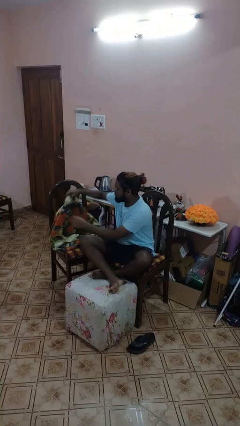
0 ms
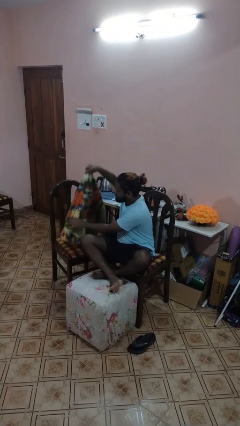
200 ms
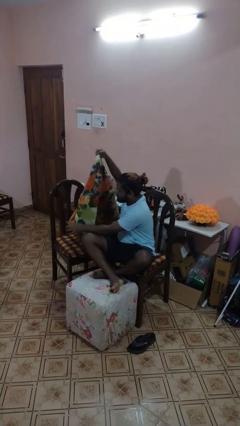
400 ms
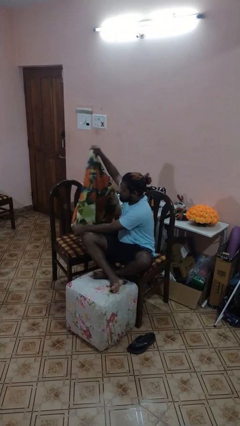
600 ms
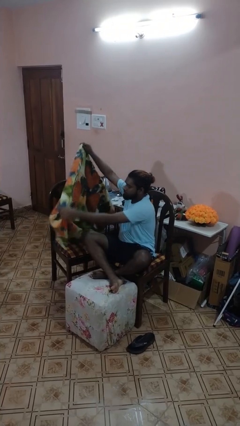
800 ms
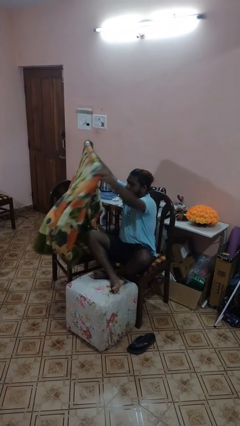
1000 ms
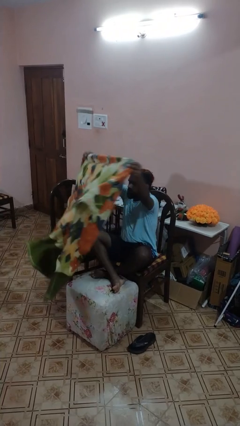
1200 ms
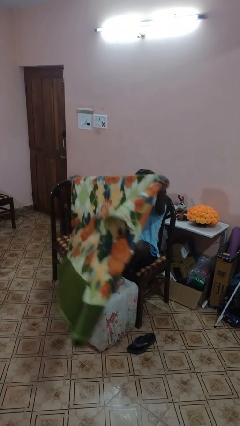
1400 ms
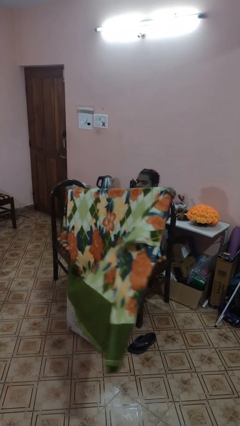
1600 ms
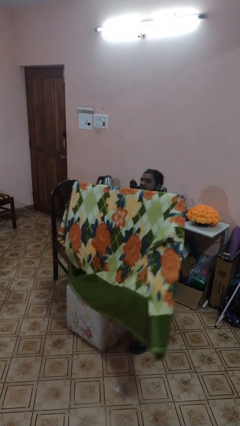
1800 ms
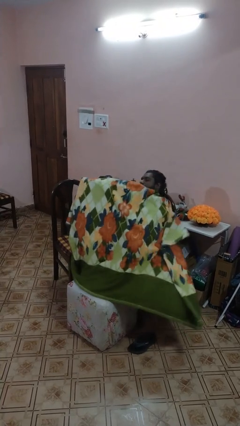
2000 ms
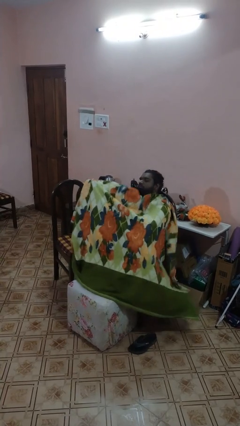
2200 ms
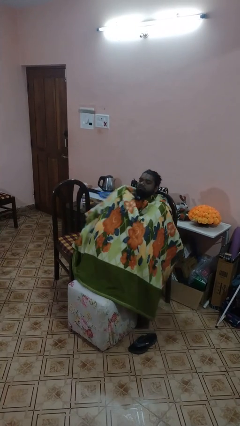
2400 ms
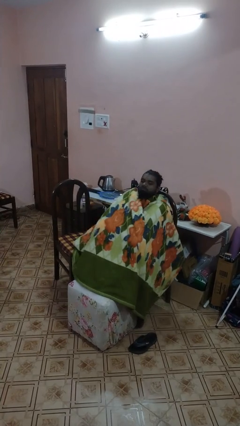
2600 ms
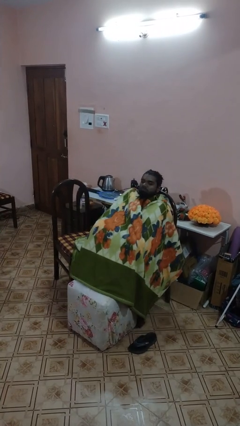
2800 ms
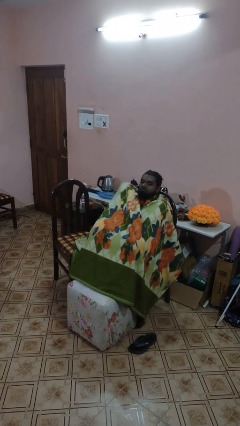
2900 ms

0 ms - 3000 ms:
person covers with blanket

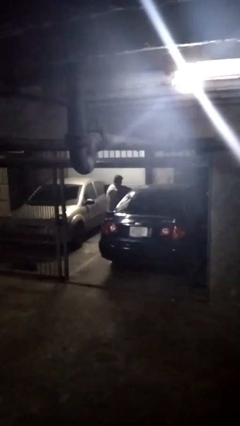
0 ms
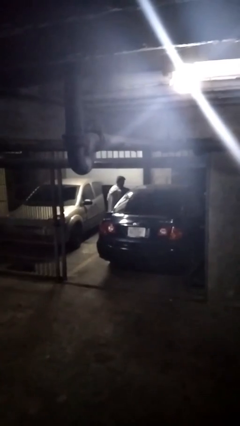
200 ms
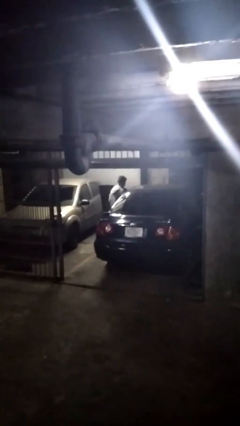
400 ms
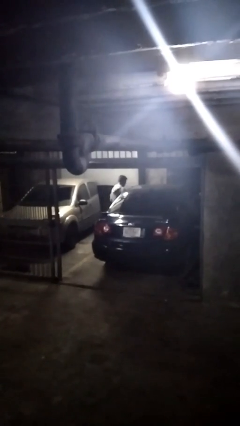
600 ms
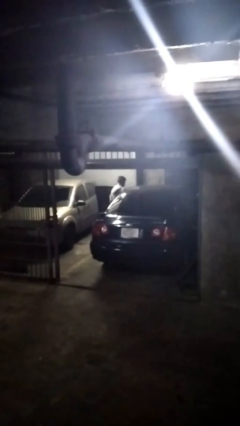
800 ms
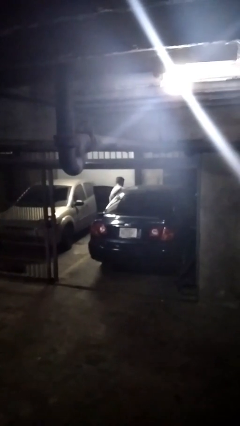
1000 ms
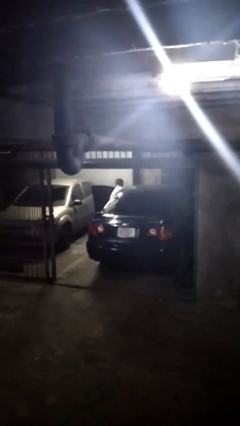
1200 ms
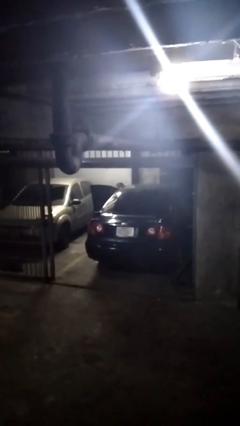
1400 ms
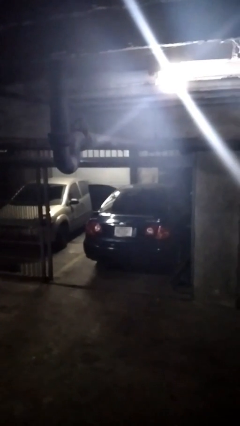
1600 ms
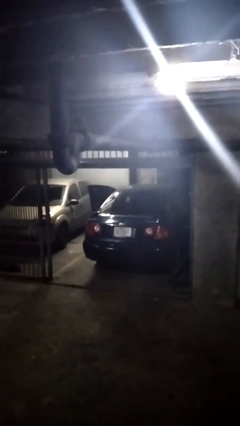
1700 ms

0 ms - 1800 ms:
person enters car

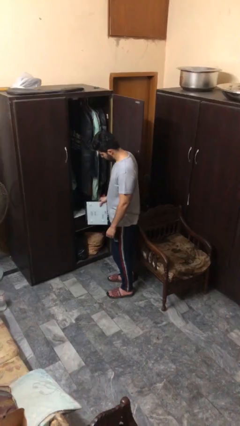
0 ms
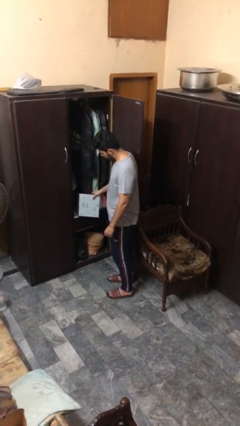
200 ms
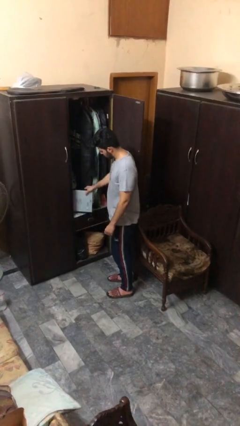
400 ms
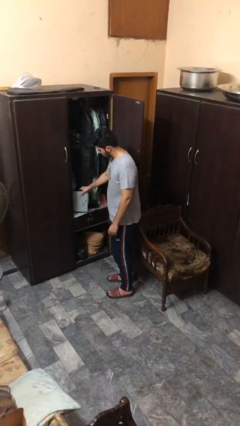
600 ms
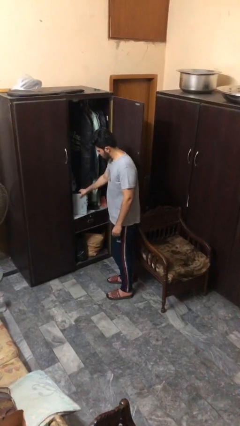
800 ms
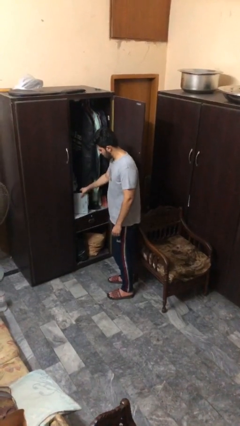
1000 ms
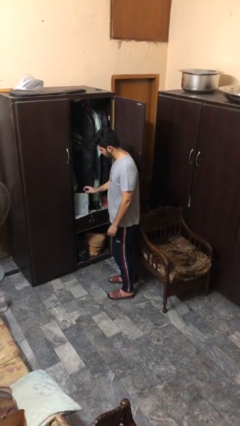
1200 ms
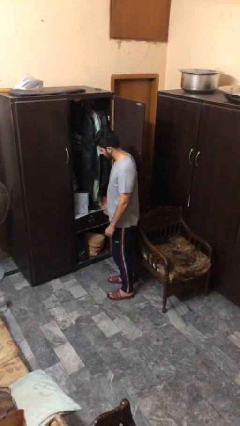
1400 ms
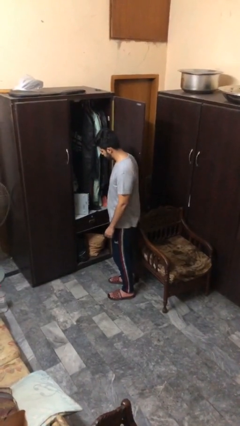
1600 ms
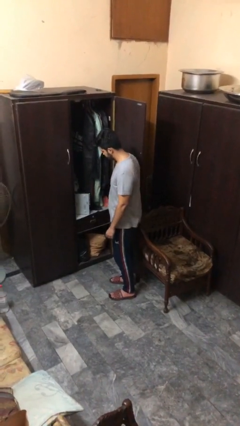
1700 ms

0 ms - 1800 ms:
person puts down object into cabinet

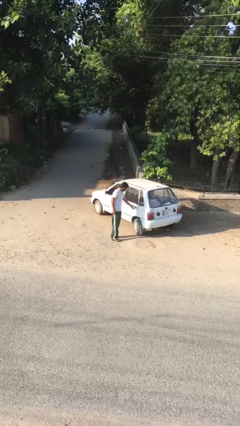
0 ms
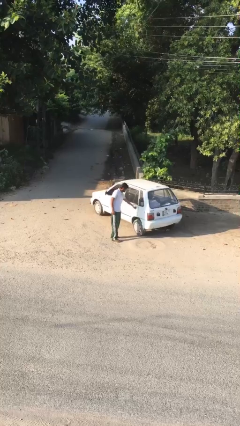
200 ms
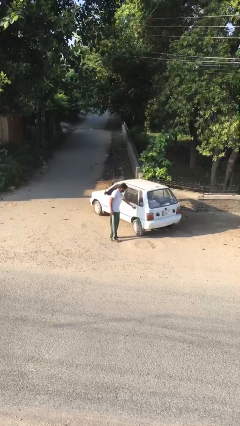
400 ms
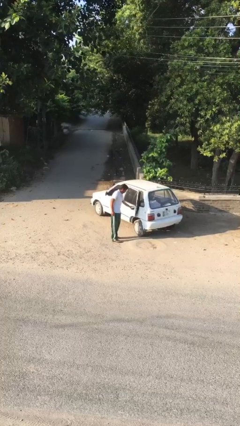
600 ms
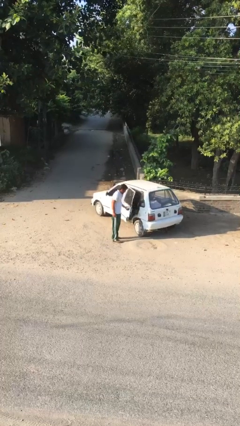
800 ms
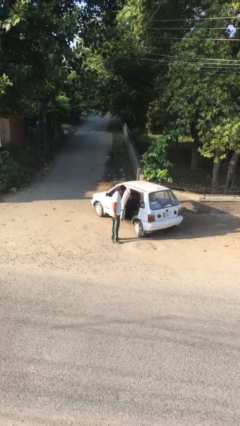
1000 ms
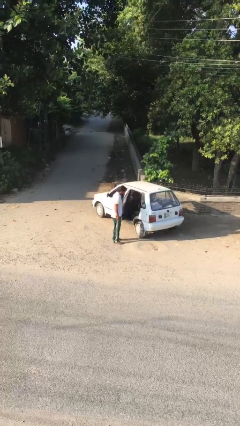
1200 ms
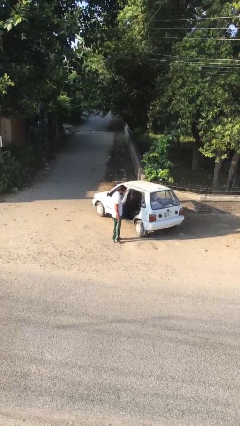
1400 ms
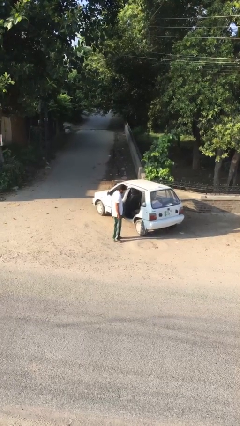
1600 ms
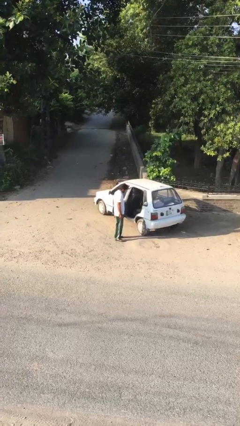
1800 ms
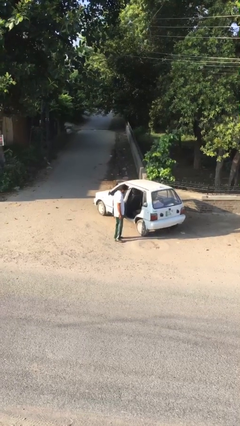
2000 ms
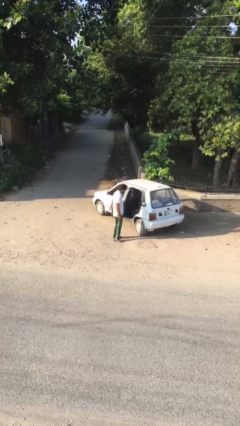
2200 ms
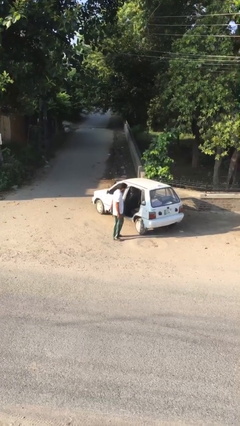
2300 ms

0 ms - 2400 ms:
person opens car door

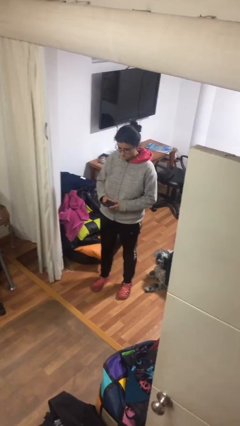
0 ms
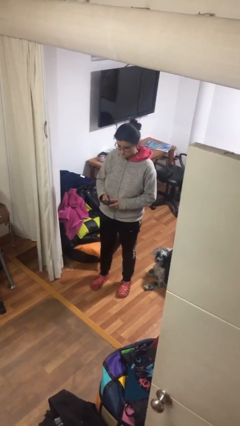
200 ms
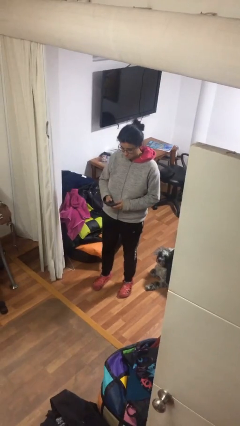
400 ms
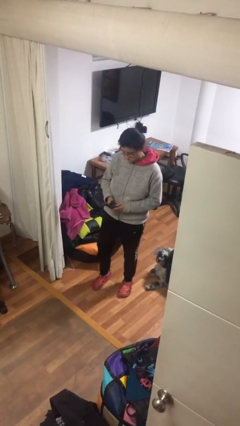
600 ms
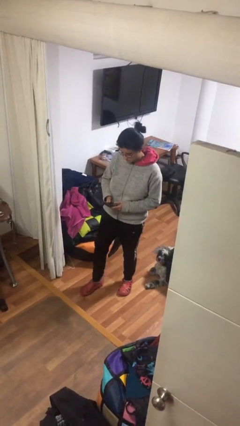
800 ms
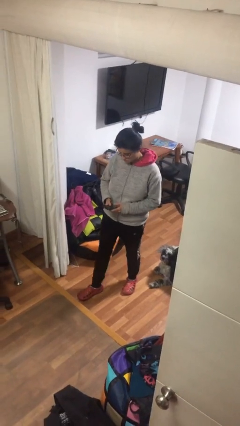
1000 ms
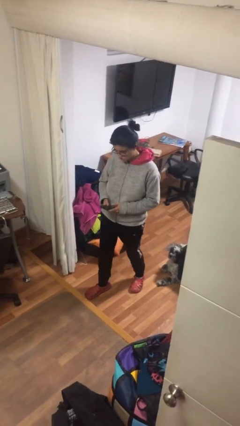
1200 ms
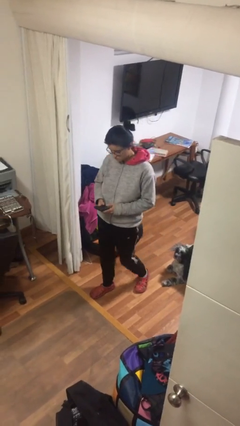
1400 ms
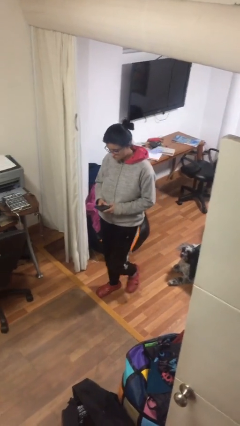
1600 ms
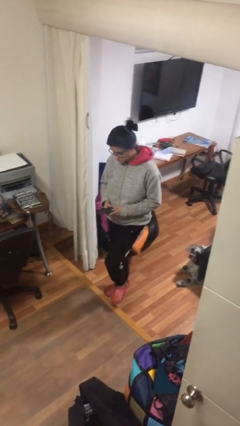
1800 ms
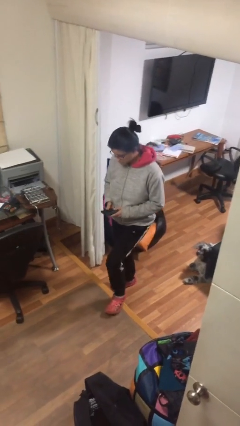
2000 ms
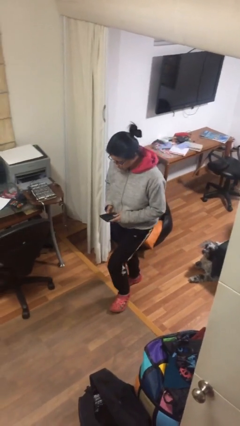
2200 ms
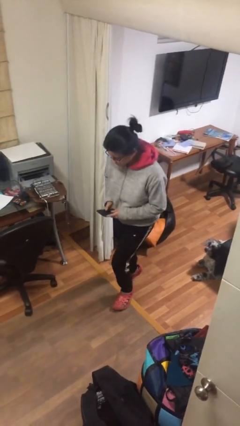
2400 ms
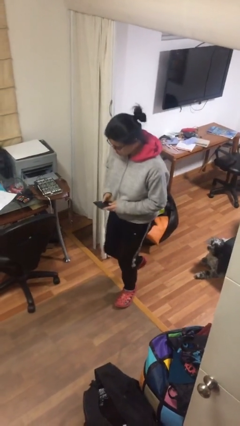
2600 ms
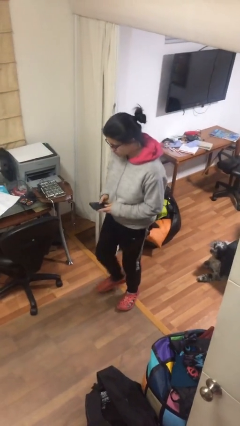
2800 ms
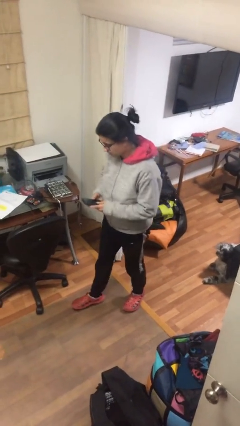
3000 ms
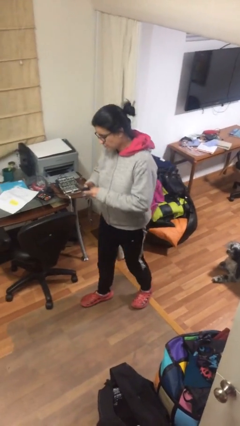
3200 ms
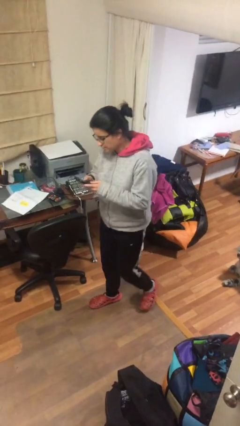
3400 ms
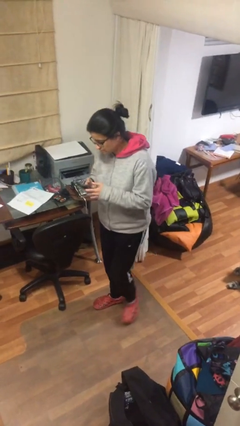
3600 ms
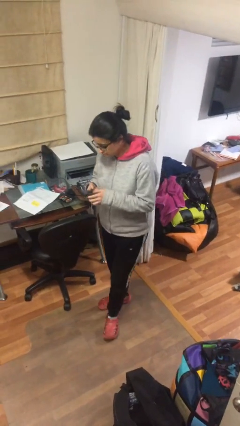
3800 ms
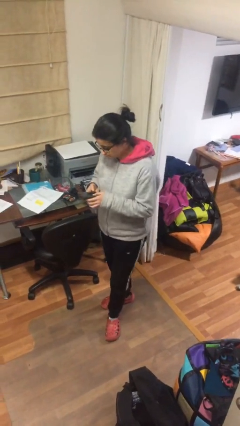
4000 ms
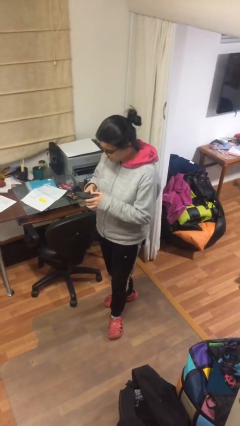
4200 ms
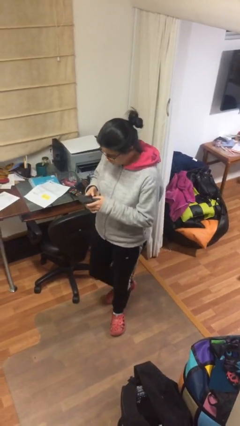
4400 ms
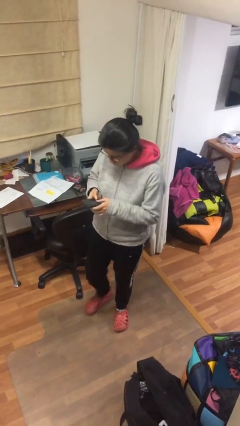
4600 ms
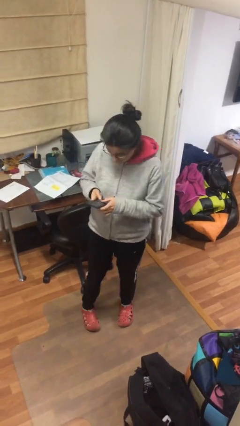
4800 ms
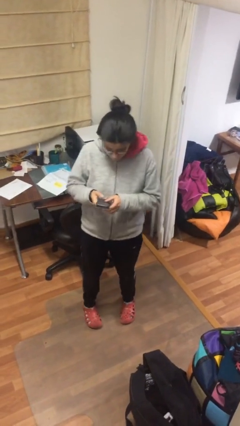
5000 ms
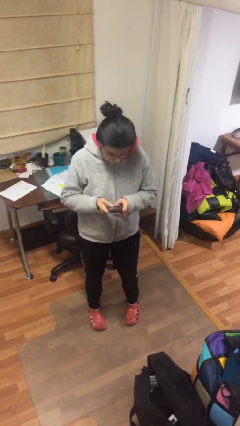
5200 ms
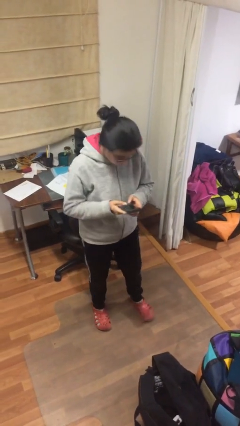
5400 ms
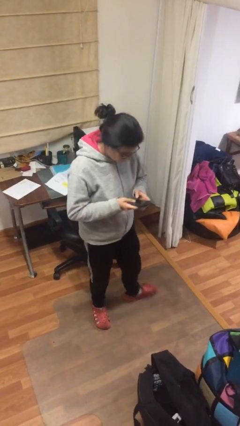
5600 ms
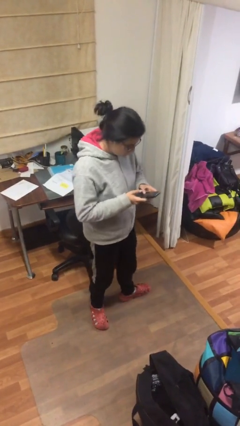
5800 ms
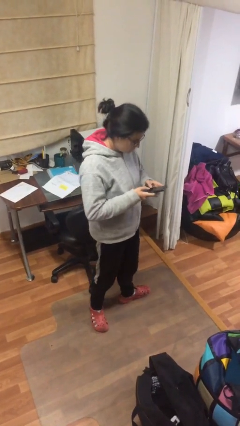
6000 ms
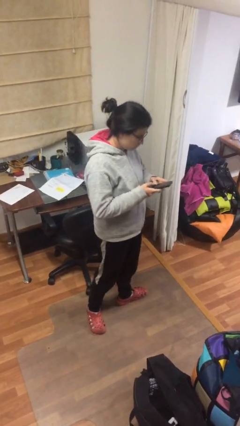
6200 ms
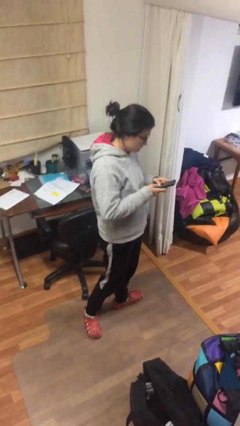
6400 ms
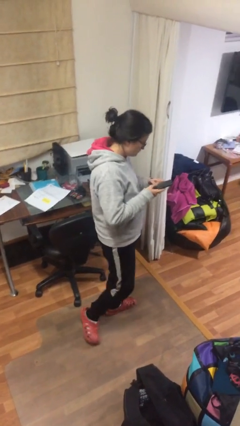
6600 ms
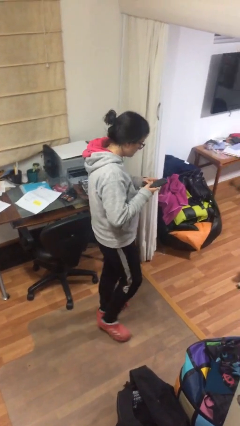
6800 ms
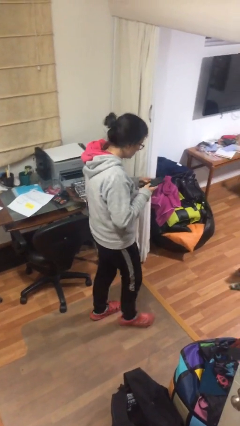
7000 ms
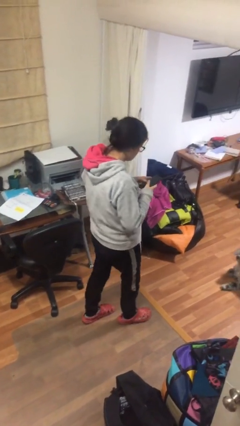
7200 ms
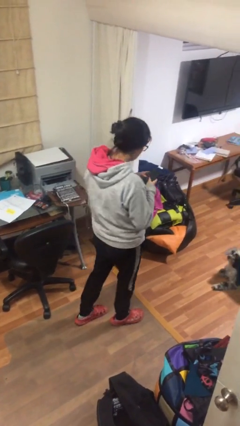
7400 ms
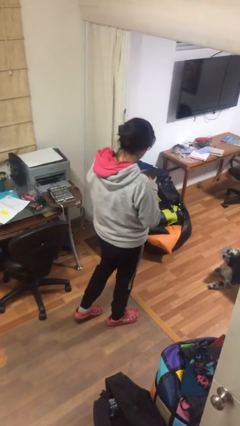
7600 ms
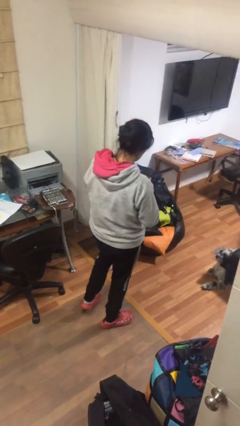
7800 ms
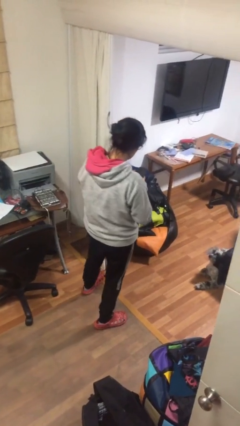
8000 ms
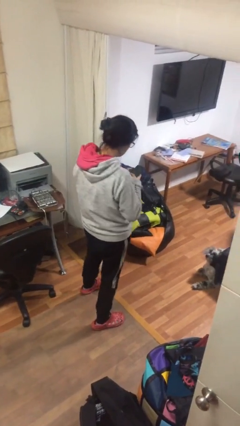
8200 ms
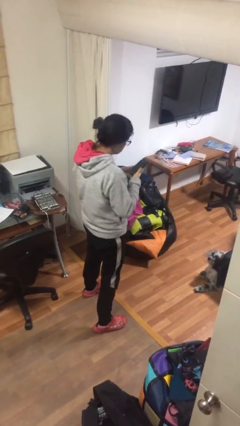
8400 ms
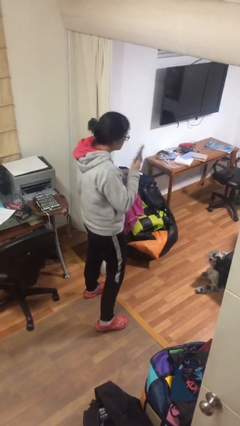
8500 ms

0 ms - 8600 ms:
person texts on phone
